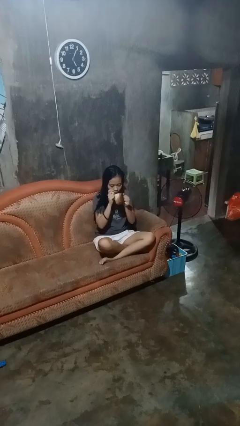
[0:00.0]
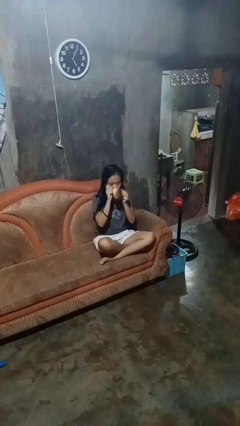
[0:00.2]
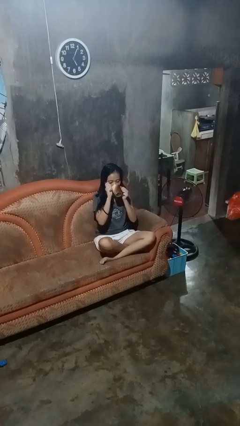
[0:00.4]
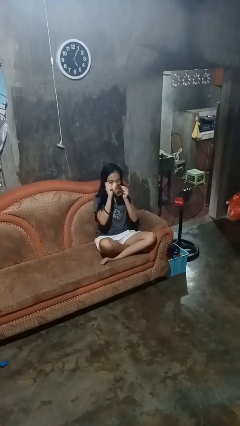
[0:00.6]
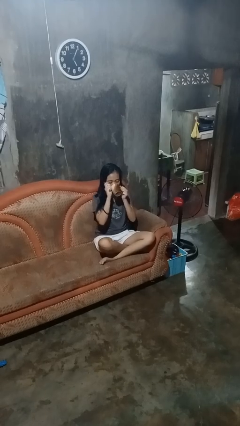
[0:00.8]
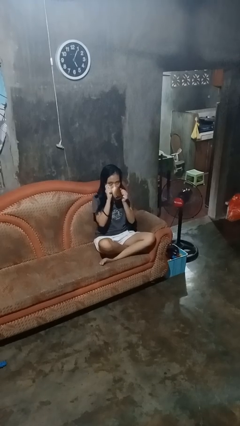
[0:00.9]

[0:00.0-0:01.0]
person drinks from mug

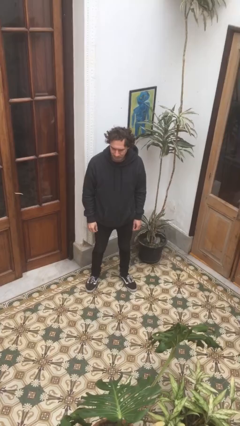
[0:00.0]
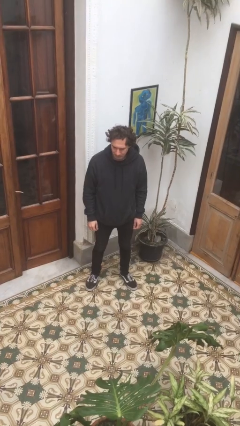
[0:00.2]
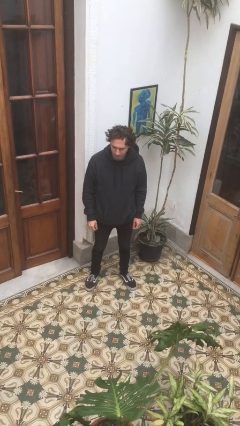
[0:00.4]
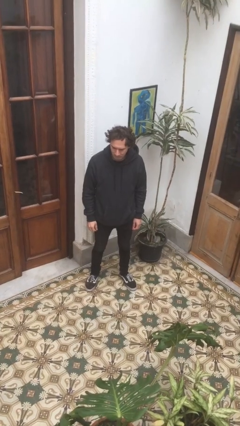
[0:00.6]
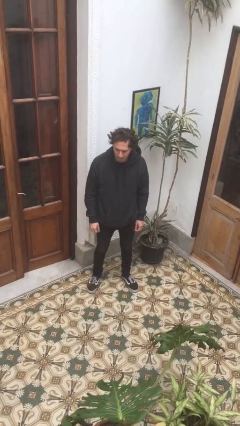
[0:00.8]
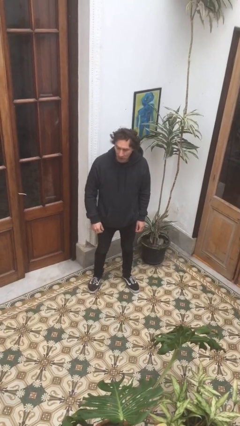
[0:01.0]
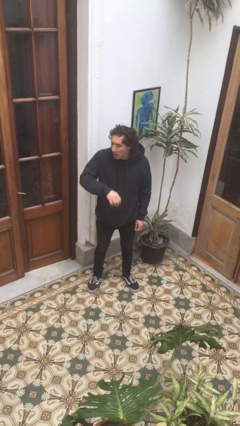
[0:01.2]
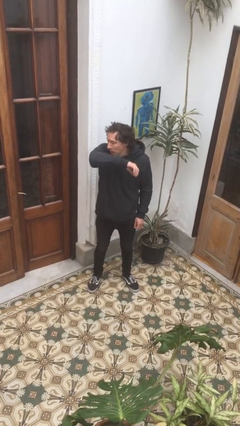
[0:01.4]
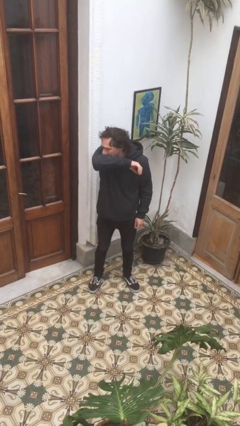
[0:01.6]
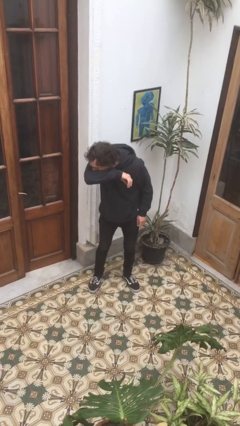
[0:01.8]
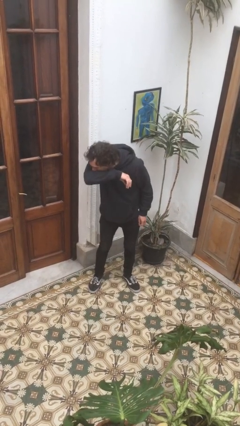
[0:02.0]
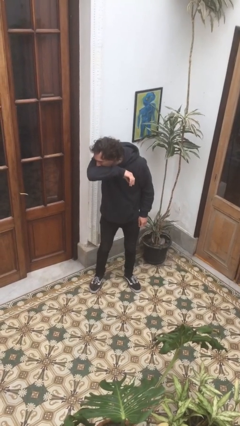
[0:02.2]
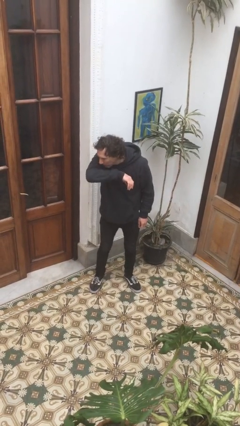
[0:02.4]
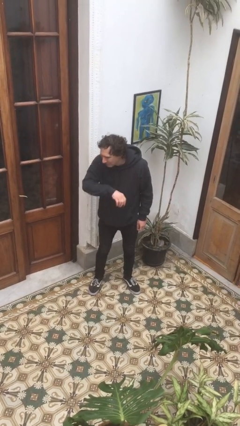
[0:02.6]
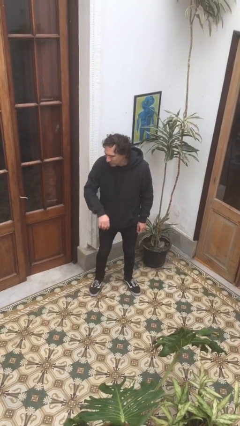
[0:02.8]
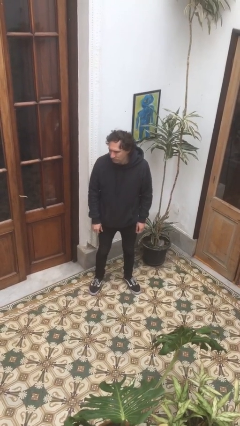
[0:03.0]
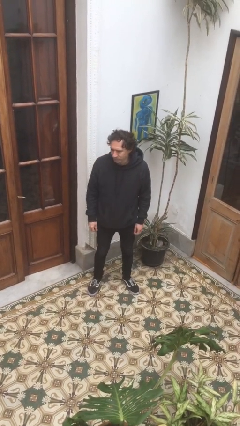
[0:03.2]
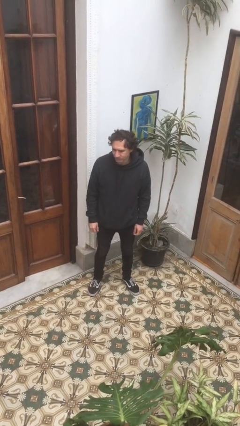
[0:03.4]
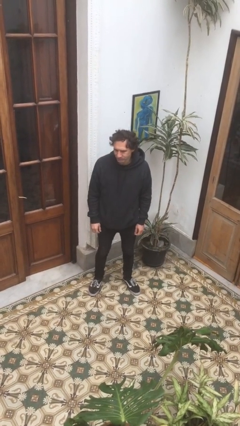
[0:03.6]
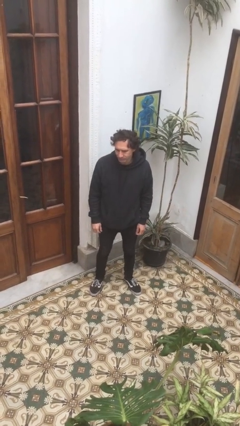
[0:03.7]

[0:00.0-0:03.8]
person sneezes into arm

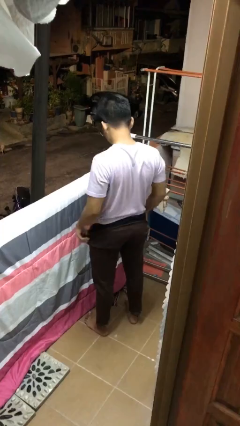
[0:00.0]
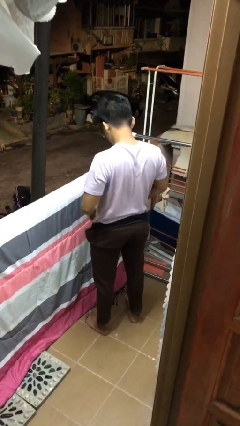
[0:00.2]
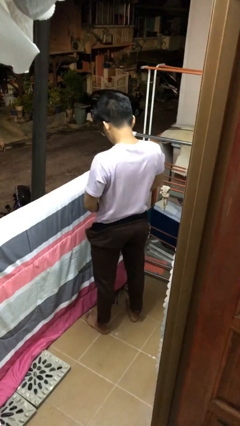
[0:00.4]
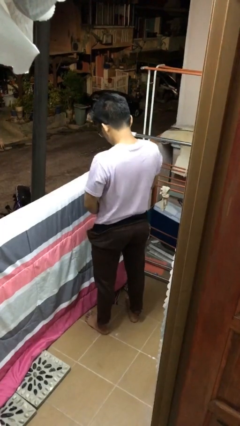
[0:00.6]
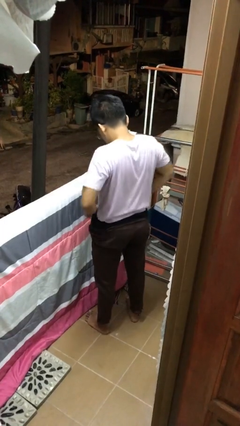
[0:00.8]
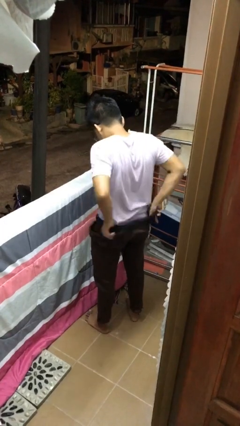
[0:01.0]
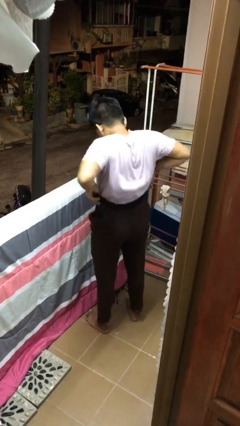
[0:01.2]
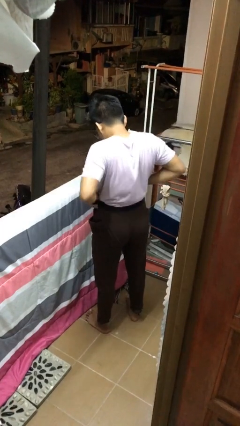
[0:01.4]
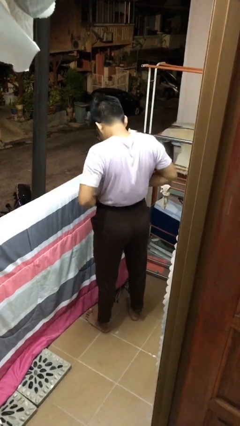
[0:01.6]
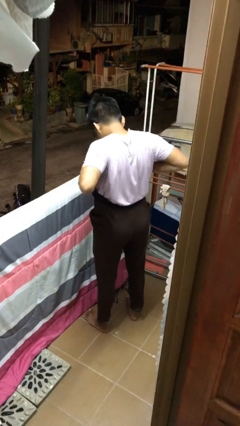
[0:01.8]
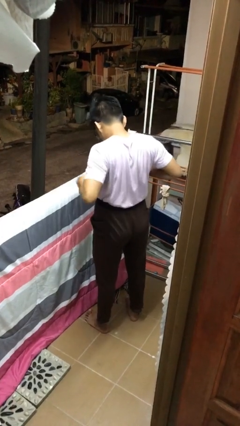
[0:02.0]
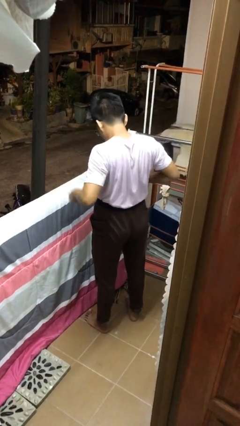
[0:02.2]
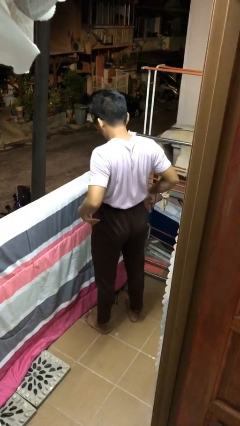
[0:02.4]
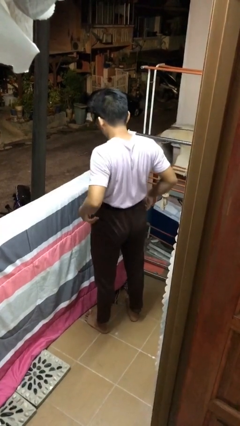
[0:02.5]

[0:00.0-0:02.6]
person hikes up pants

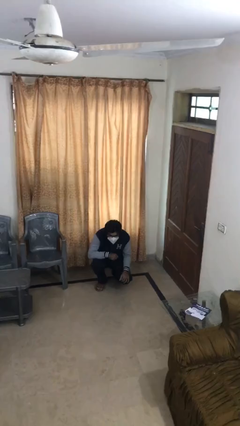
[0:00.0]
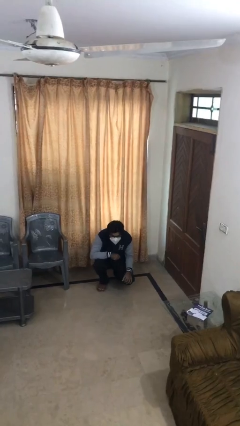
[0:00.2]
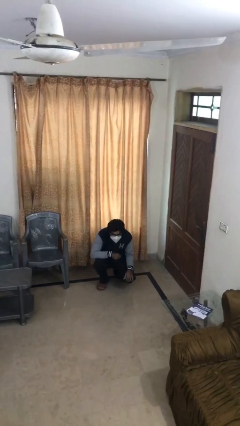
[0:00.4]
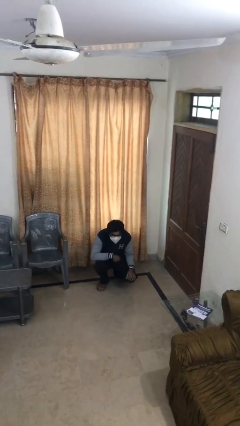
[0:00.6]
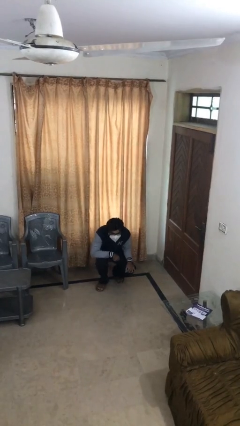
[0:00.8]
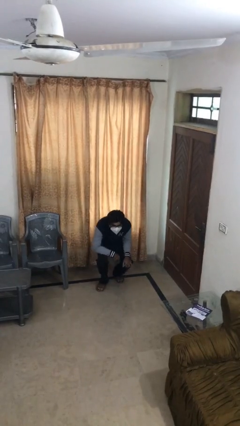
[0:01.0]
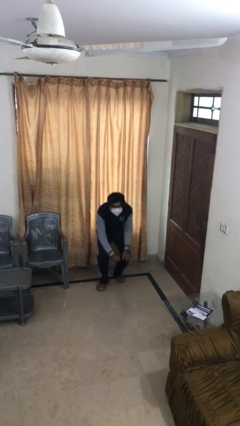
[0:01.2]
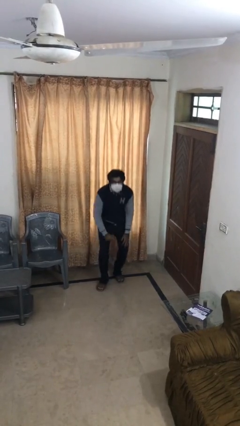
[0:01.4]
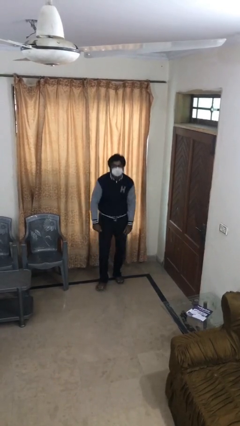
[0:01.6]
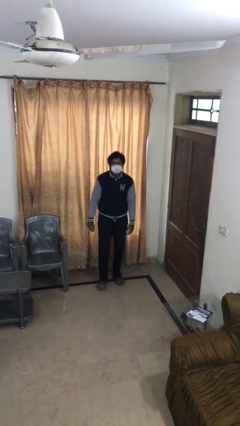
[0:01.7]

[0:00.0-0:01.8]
person stands up

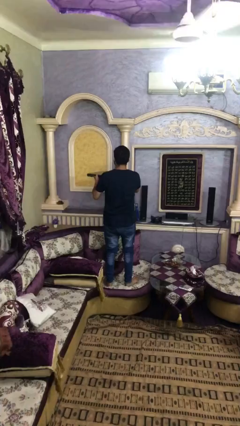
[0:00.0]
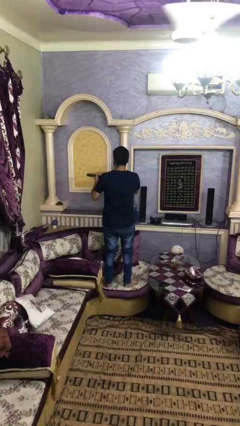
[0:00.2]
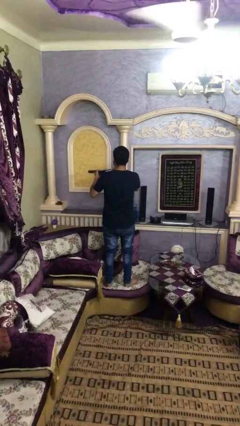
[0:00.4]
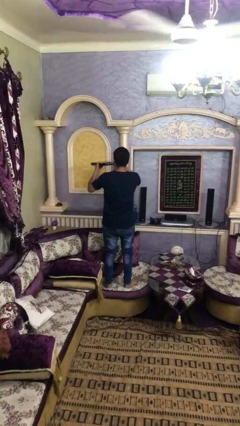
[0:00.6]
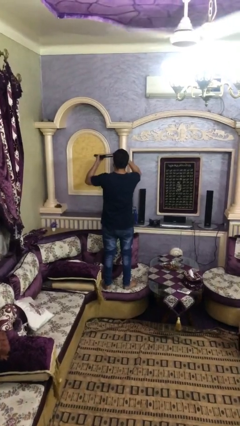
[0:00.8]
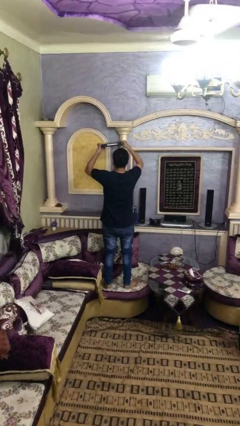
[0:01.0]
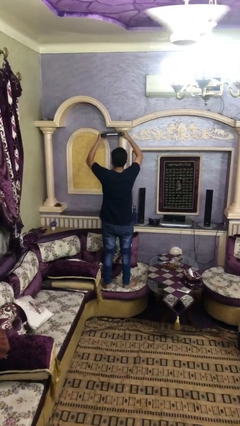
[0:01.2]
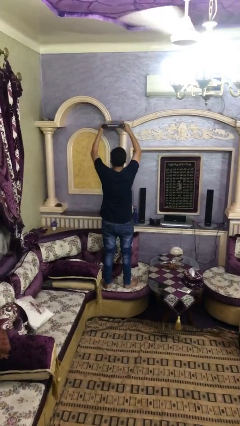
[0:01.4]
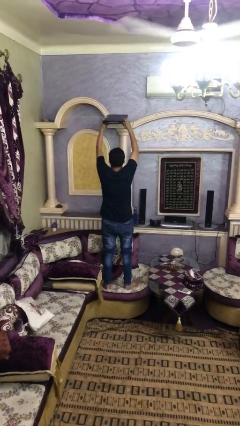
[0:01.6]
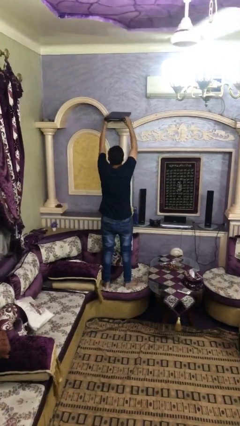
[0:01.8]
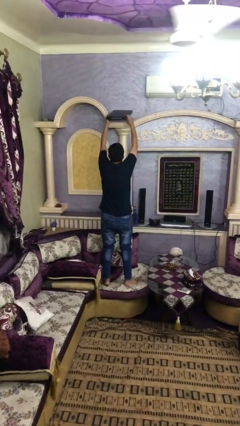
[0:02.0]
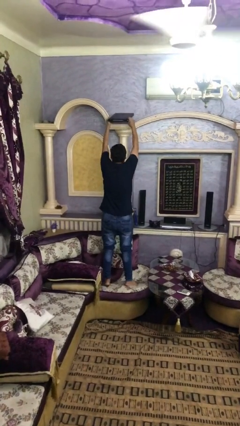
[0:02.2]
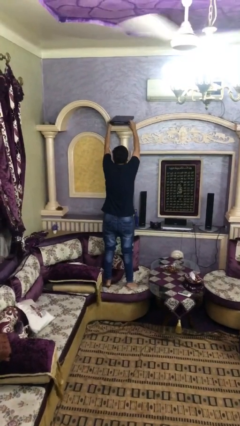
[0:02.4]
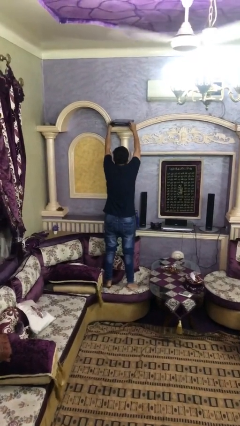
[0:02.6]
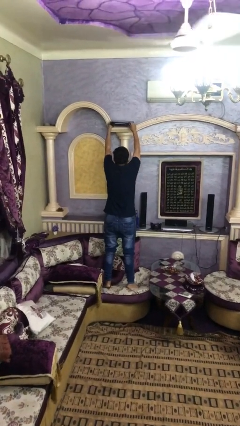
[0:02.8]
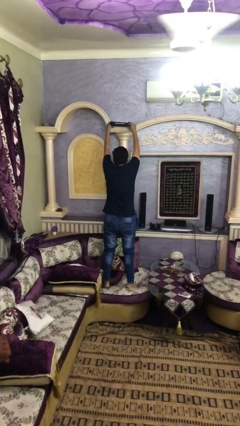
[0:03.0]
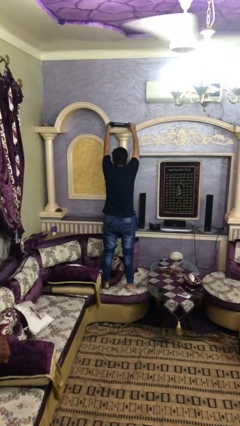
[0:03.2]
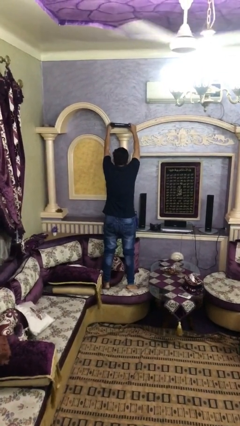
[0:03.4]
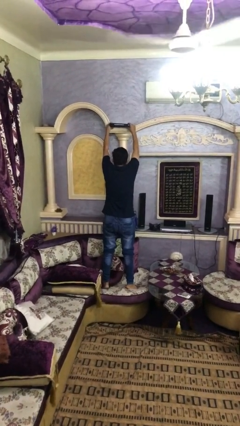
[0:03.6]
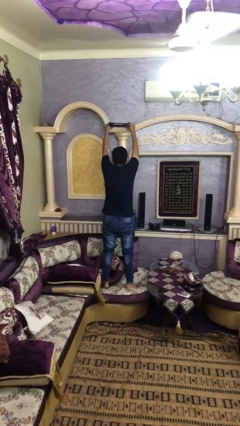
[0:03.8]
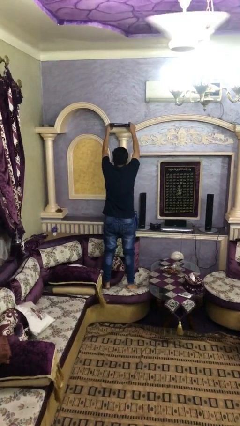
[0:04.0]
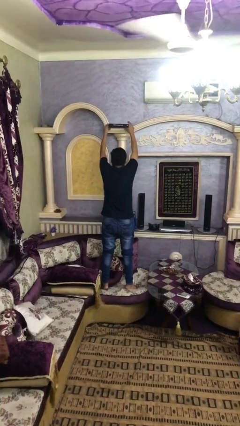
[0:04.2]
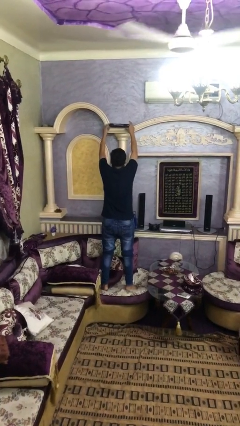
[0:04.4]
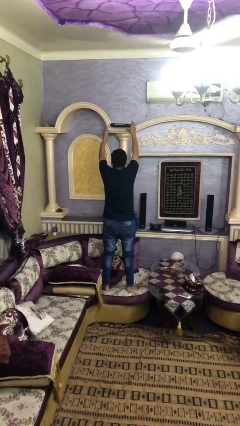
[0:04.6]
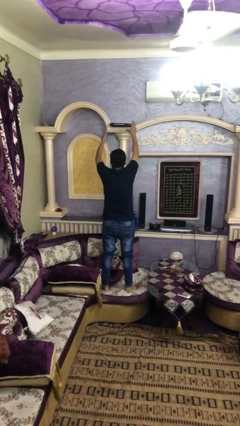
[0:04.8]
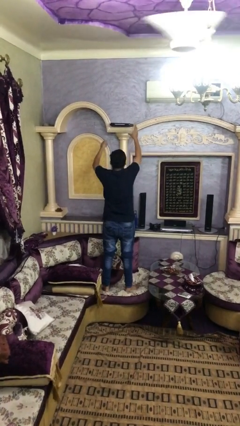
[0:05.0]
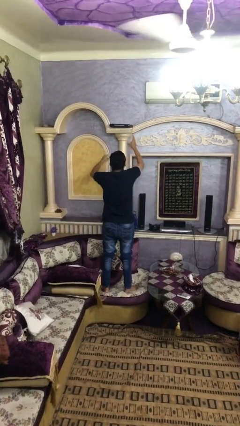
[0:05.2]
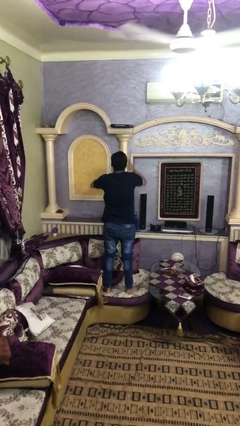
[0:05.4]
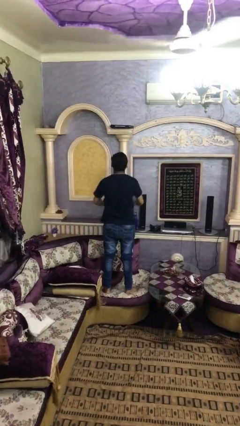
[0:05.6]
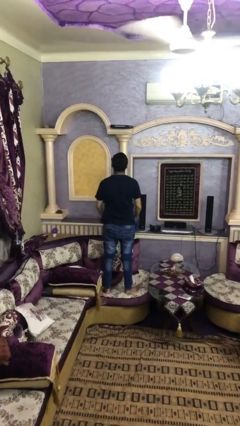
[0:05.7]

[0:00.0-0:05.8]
person puts down object on shelf

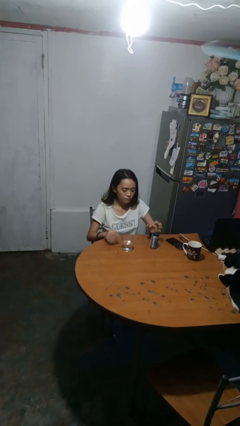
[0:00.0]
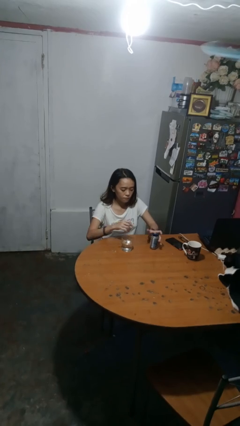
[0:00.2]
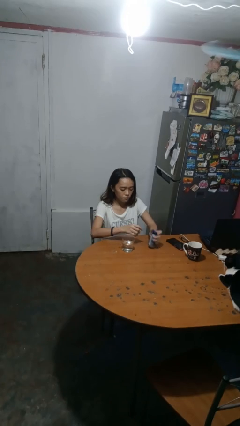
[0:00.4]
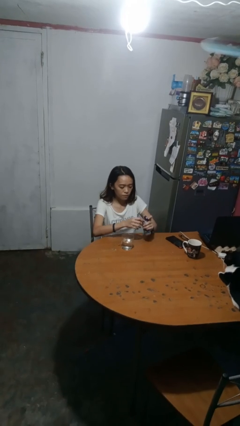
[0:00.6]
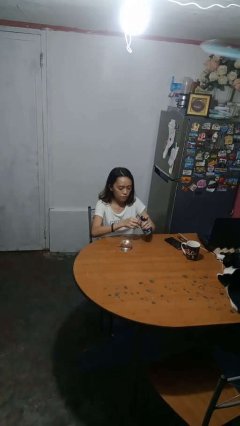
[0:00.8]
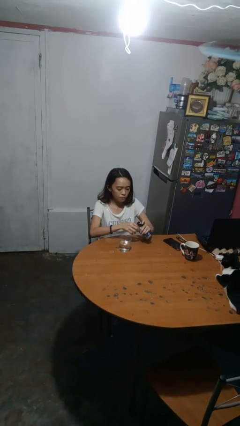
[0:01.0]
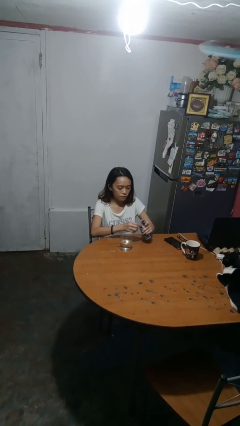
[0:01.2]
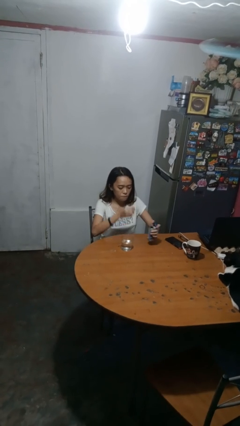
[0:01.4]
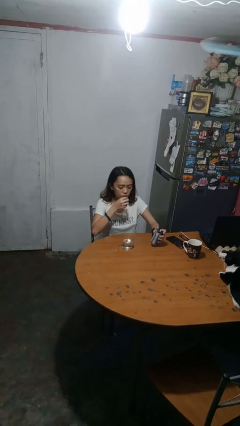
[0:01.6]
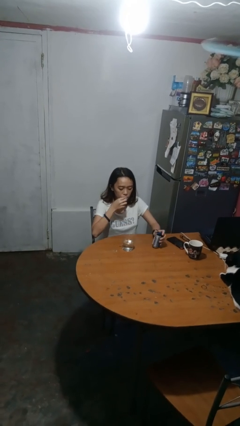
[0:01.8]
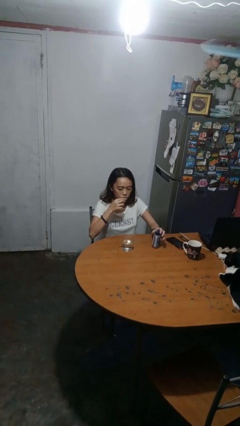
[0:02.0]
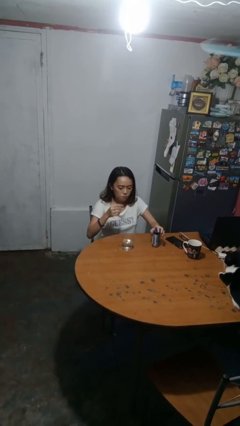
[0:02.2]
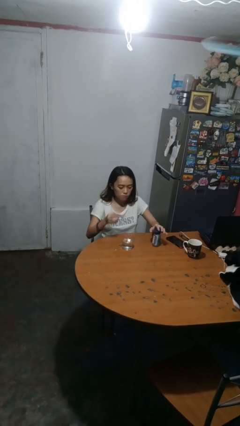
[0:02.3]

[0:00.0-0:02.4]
person takes medicine pills
